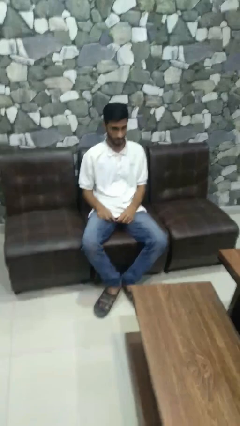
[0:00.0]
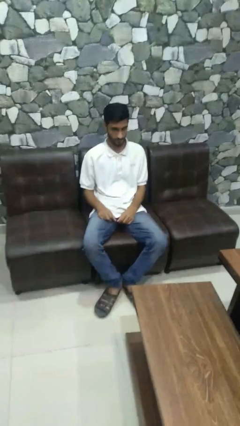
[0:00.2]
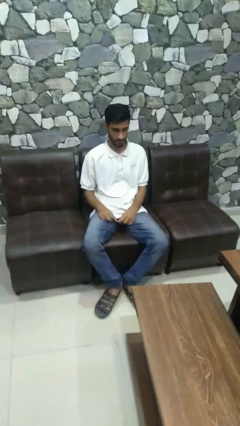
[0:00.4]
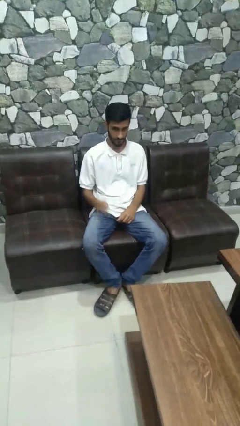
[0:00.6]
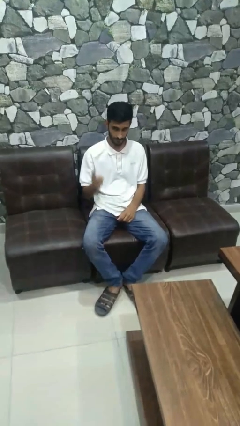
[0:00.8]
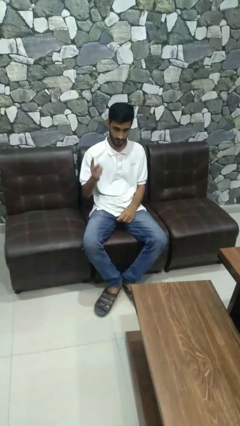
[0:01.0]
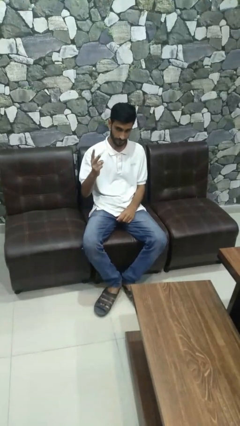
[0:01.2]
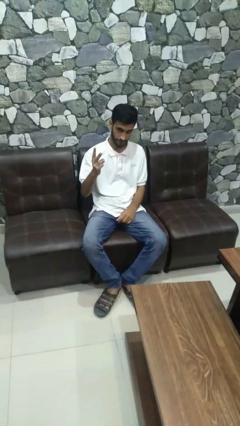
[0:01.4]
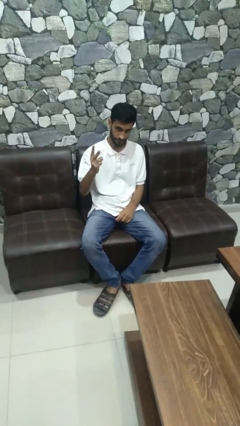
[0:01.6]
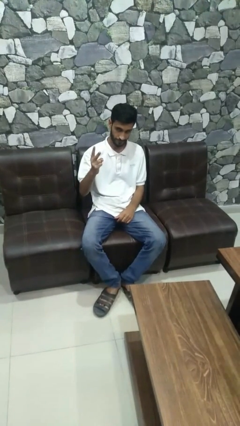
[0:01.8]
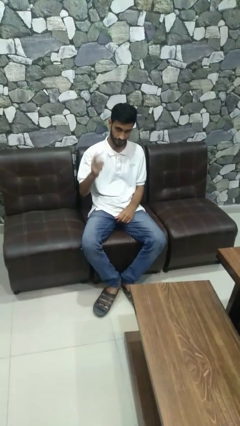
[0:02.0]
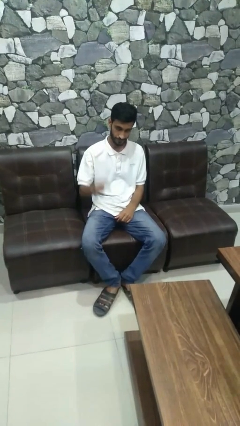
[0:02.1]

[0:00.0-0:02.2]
person gestures peace

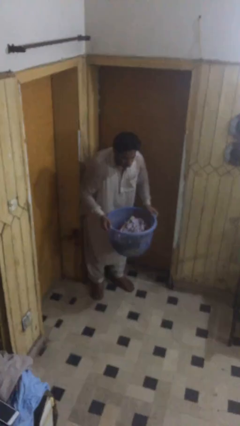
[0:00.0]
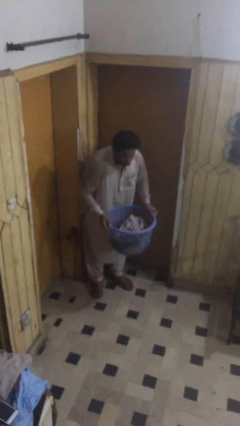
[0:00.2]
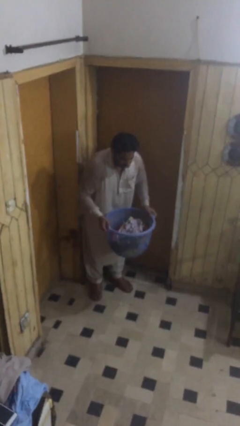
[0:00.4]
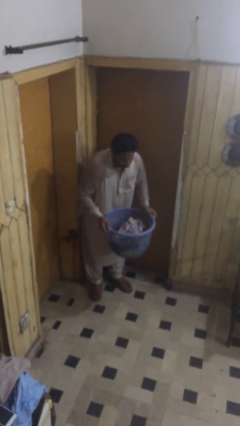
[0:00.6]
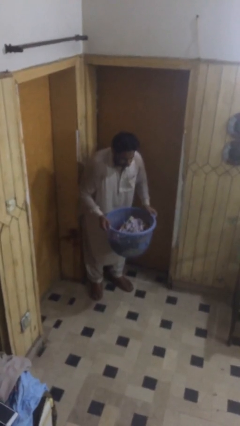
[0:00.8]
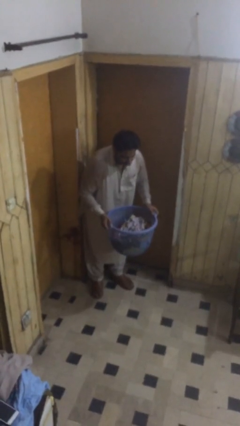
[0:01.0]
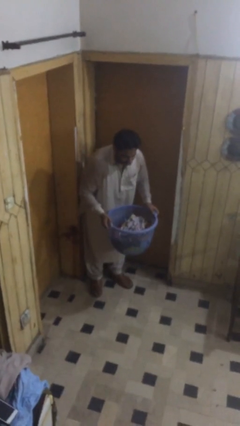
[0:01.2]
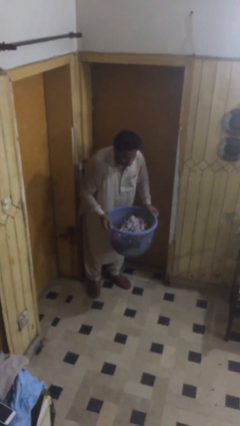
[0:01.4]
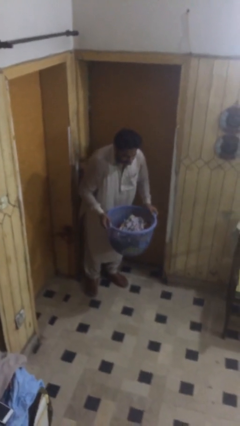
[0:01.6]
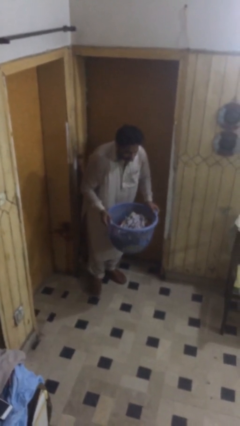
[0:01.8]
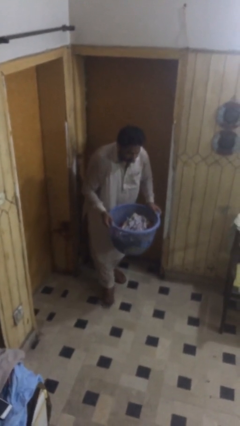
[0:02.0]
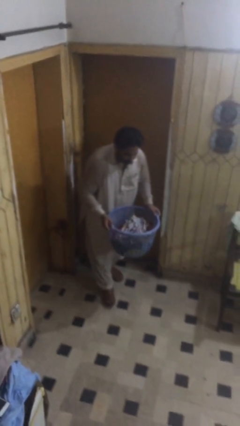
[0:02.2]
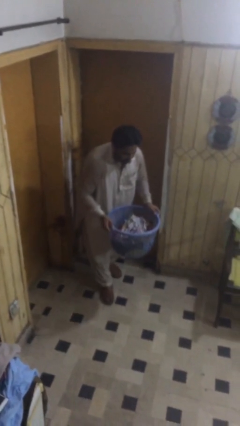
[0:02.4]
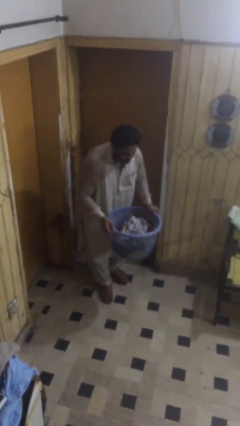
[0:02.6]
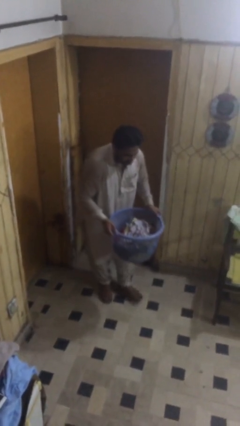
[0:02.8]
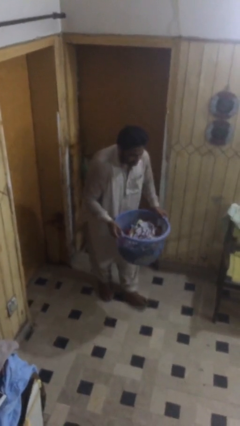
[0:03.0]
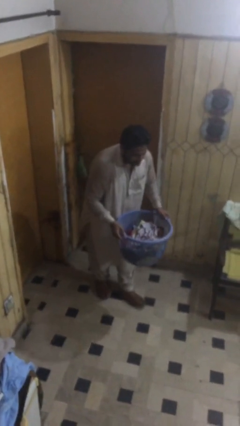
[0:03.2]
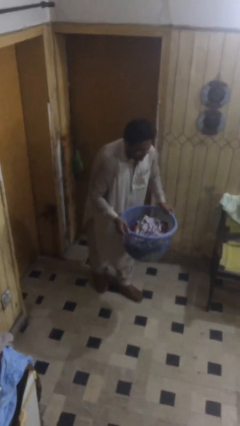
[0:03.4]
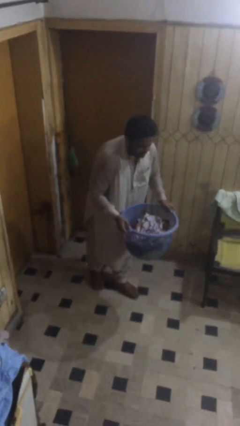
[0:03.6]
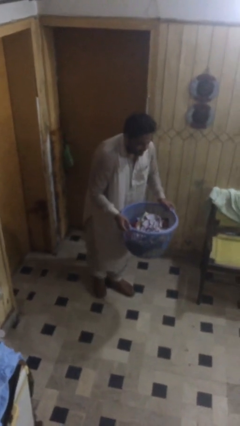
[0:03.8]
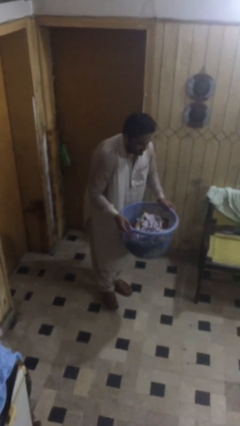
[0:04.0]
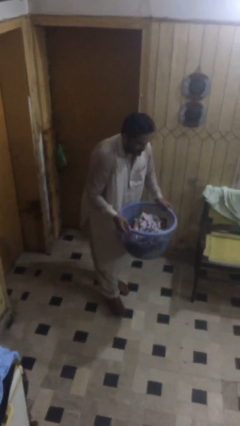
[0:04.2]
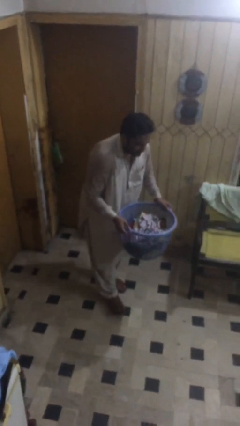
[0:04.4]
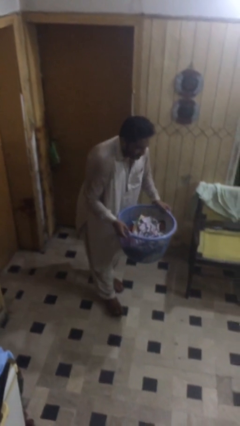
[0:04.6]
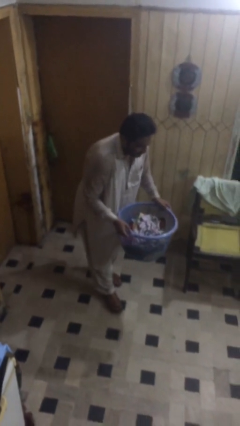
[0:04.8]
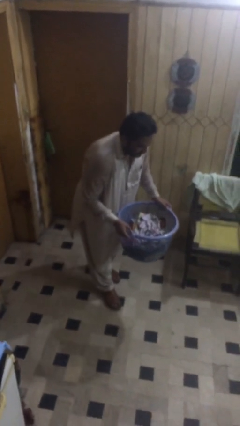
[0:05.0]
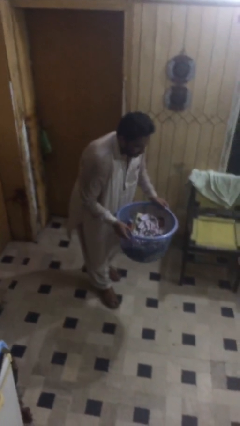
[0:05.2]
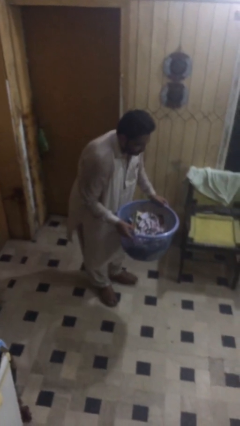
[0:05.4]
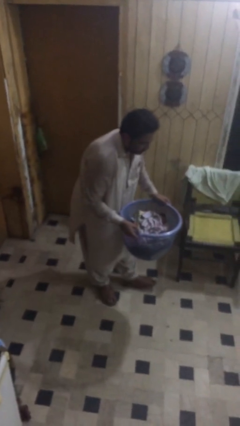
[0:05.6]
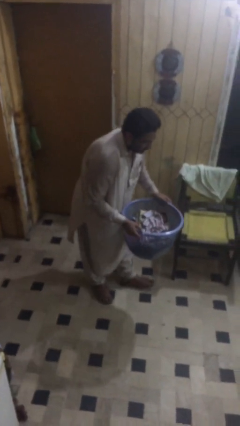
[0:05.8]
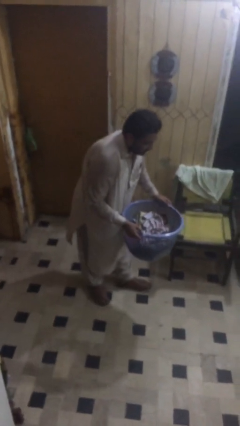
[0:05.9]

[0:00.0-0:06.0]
person carries heavy object

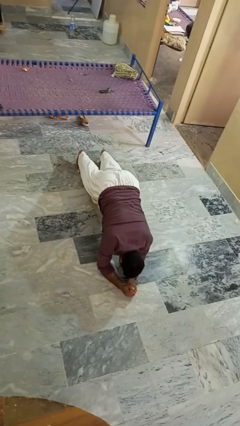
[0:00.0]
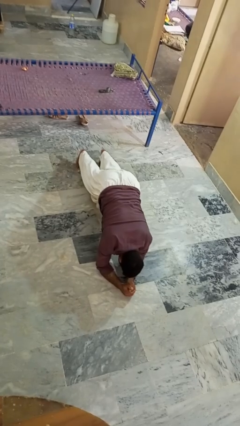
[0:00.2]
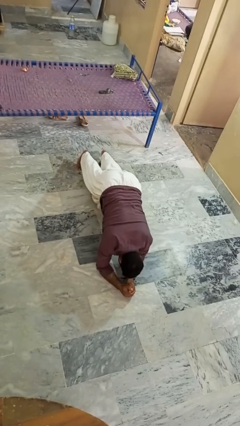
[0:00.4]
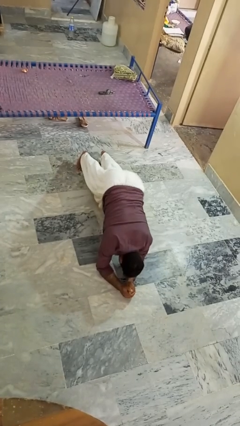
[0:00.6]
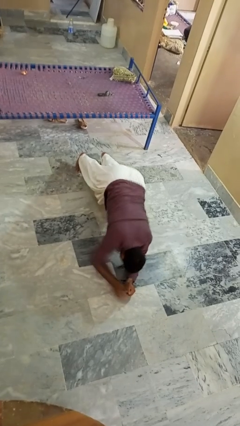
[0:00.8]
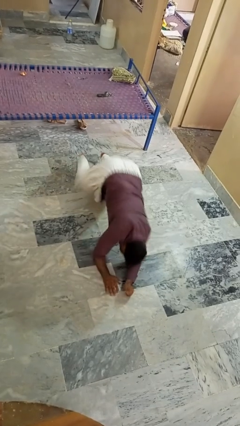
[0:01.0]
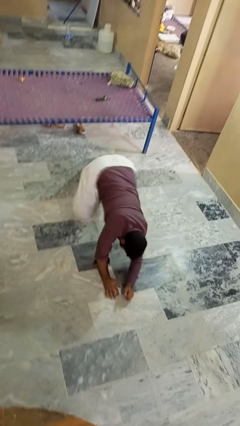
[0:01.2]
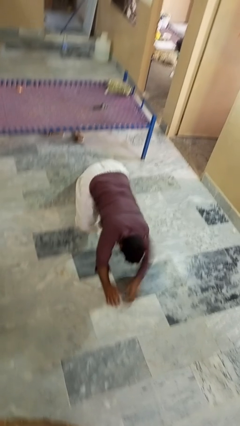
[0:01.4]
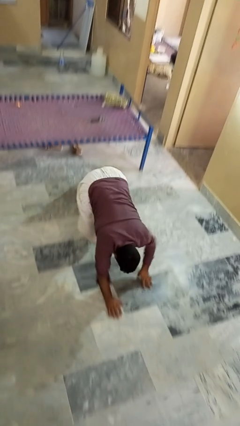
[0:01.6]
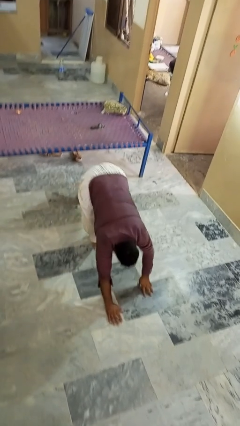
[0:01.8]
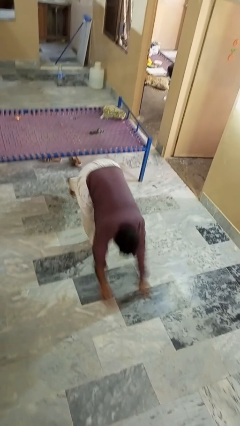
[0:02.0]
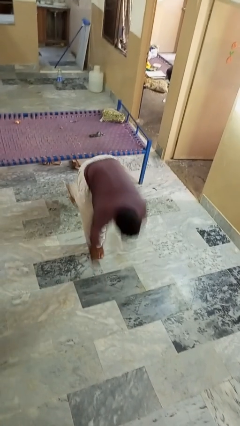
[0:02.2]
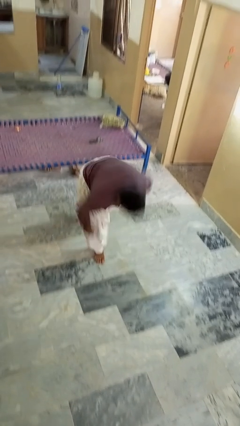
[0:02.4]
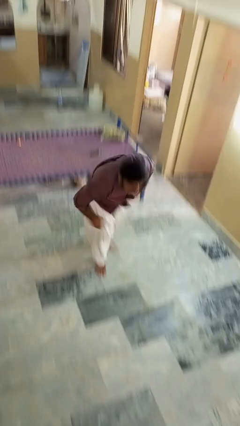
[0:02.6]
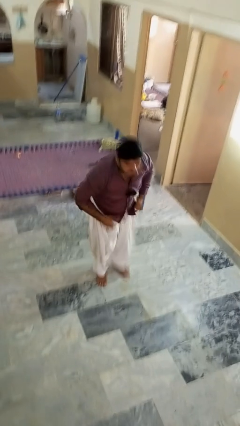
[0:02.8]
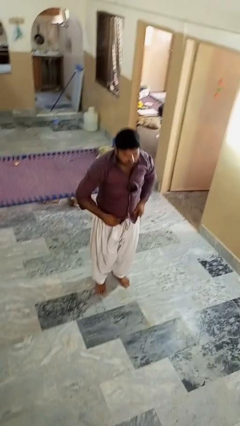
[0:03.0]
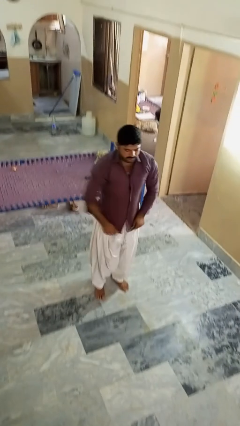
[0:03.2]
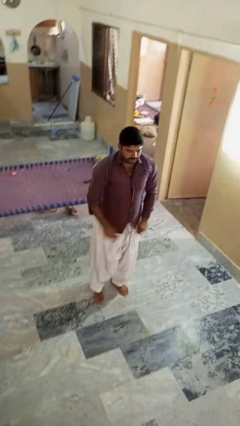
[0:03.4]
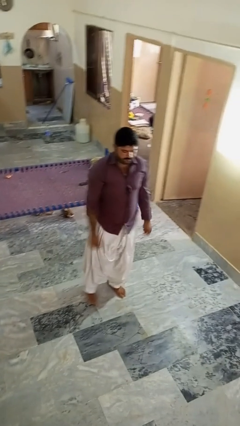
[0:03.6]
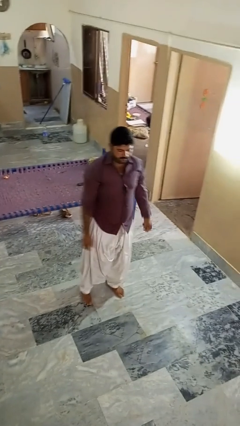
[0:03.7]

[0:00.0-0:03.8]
person stands up from floor

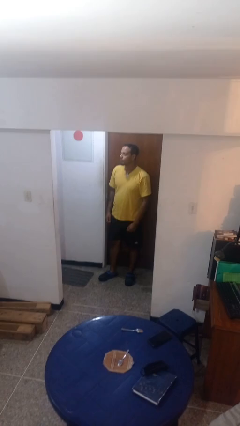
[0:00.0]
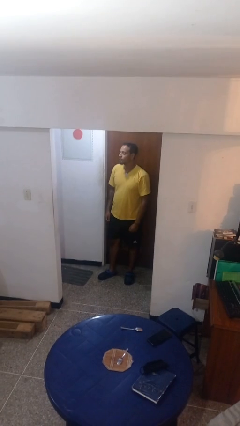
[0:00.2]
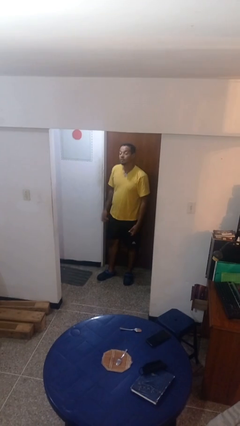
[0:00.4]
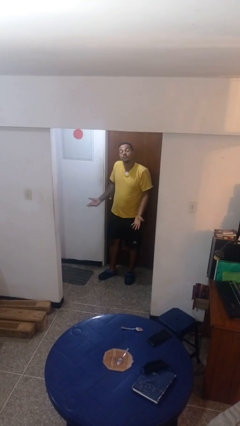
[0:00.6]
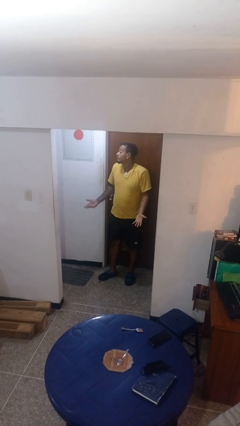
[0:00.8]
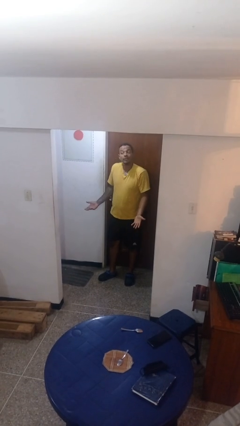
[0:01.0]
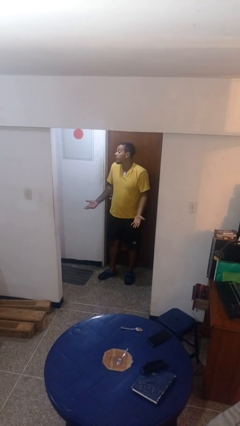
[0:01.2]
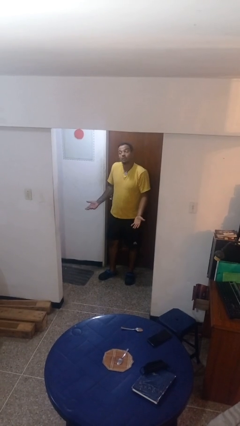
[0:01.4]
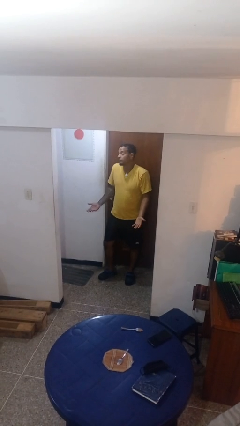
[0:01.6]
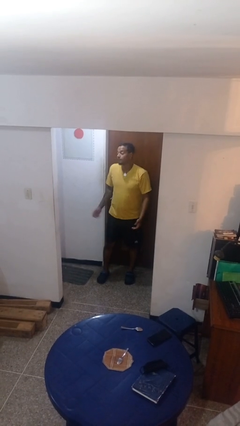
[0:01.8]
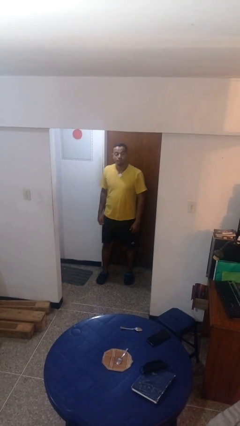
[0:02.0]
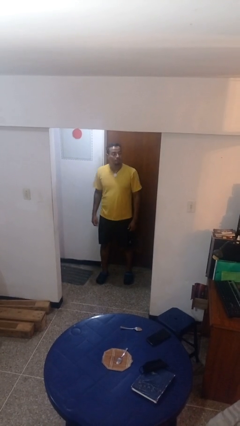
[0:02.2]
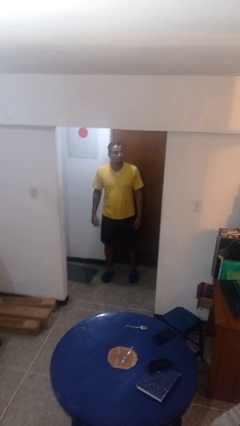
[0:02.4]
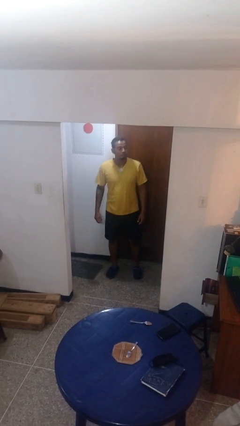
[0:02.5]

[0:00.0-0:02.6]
person shakes head

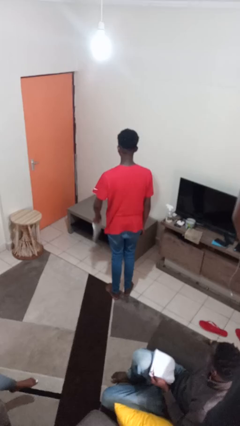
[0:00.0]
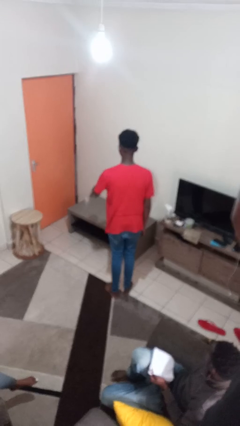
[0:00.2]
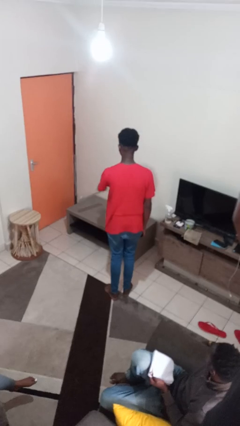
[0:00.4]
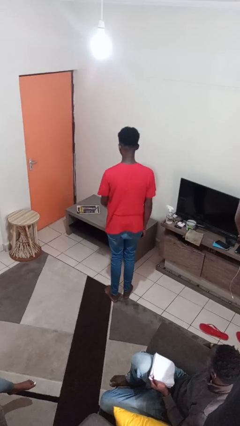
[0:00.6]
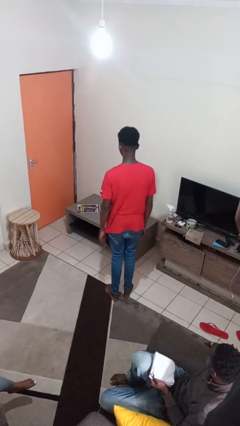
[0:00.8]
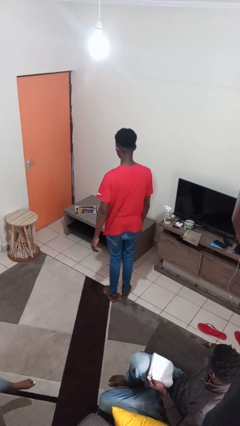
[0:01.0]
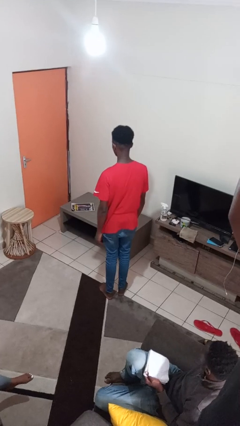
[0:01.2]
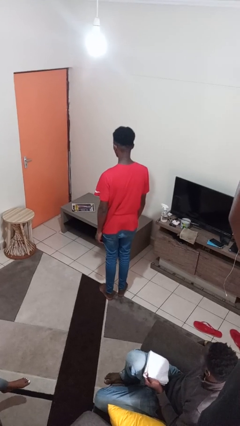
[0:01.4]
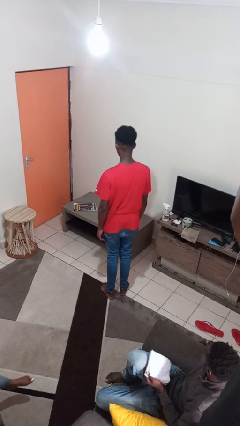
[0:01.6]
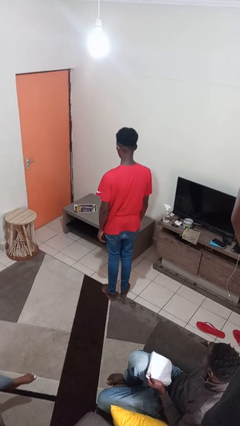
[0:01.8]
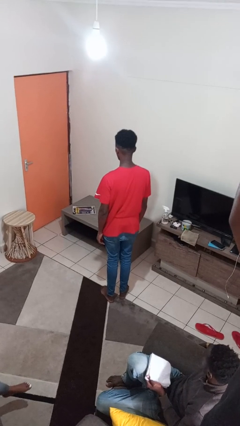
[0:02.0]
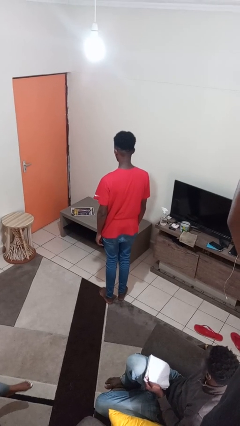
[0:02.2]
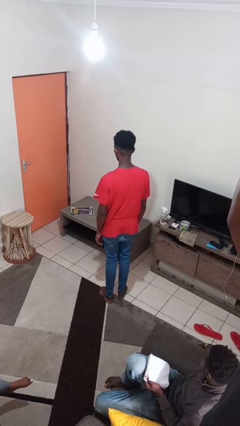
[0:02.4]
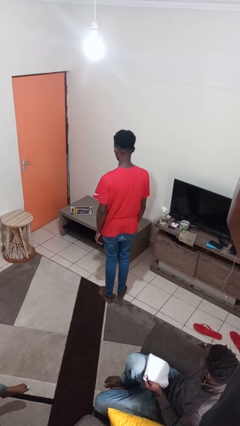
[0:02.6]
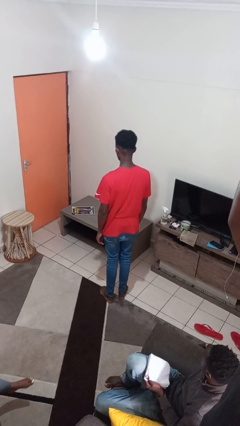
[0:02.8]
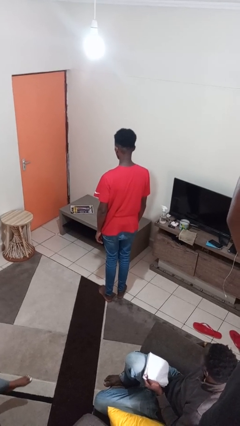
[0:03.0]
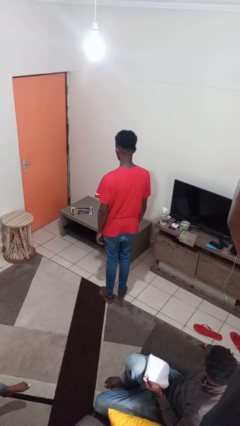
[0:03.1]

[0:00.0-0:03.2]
person throws object on table
